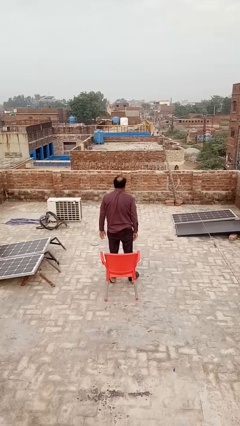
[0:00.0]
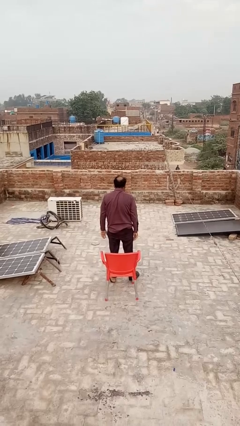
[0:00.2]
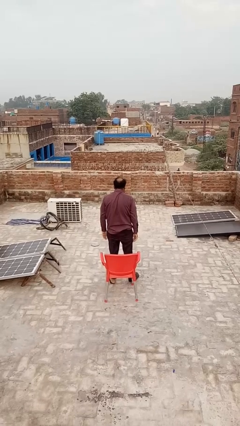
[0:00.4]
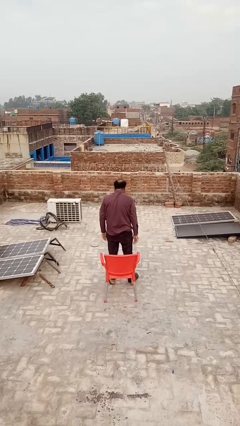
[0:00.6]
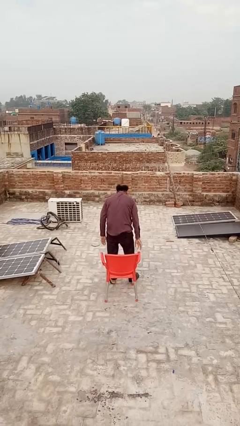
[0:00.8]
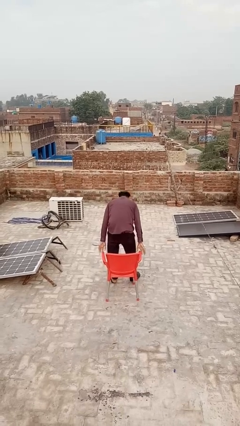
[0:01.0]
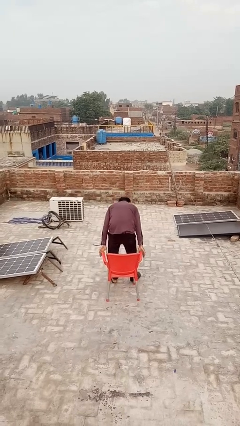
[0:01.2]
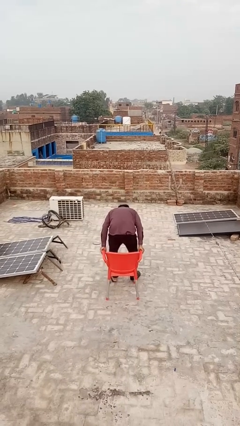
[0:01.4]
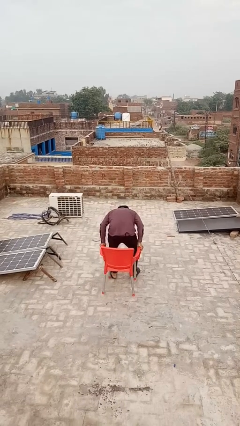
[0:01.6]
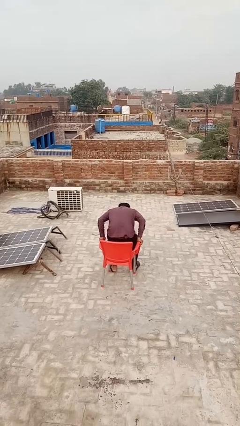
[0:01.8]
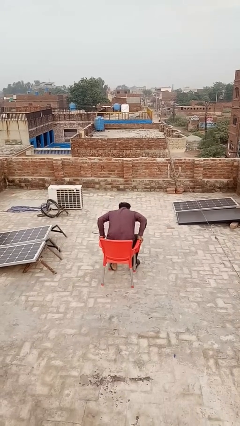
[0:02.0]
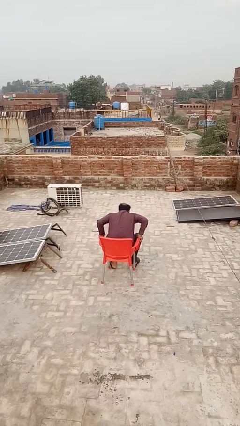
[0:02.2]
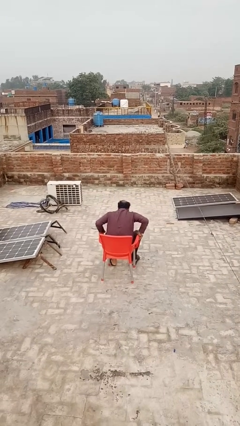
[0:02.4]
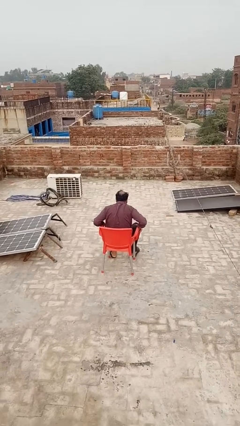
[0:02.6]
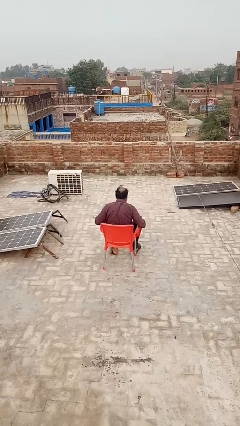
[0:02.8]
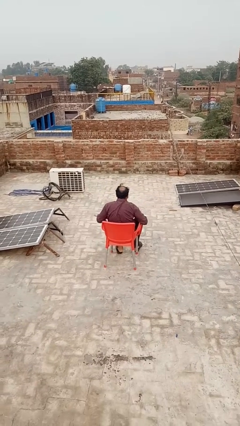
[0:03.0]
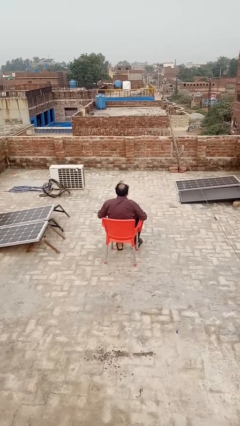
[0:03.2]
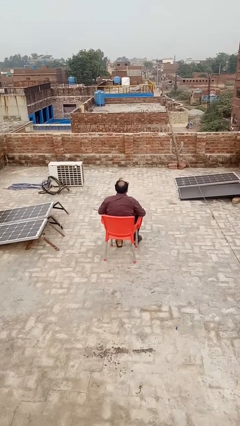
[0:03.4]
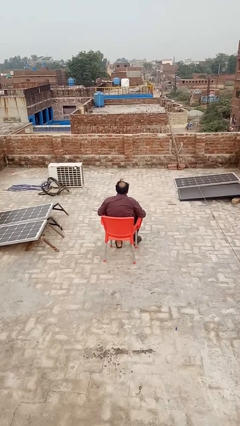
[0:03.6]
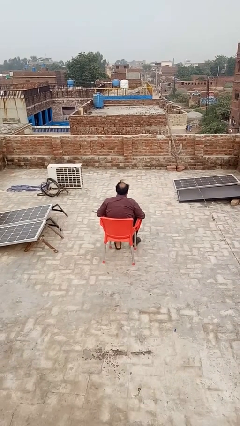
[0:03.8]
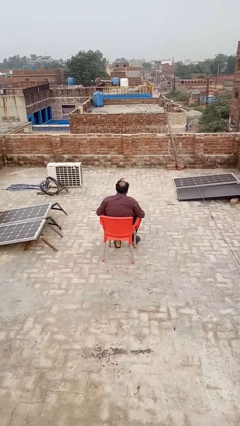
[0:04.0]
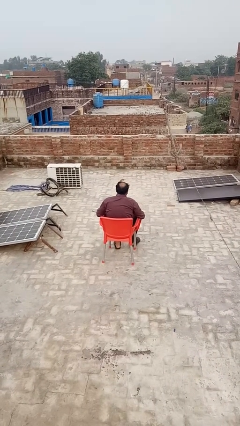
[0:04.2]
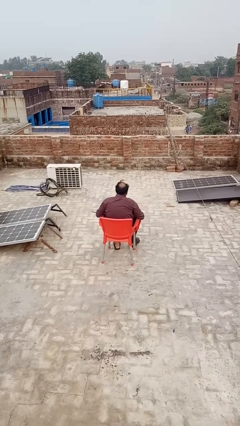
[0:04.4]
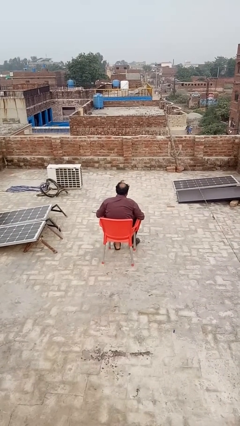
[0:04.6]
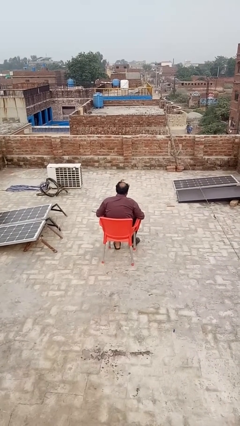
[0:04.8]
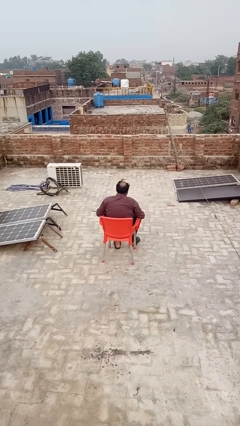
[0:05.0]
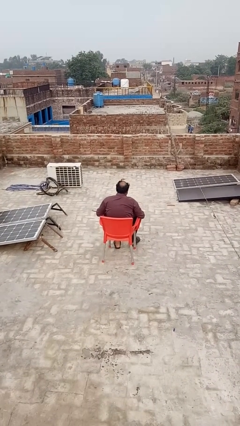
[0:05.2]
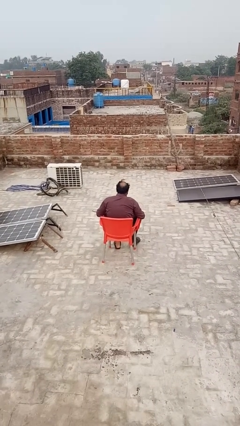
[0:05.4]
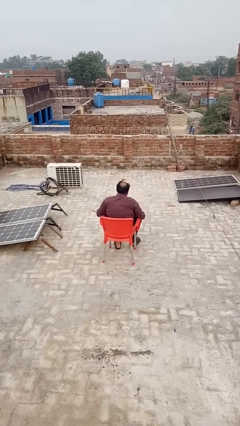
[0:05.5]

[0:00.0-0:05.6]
person sits down

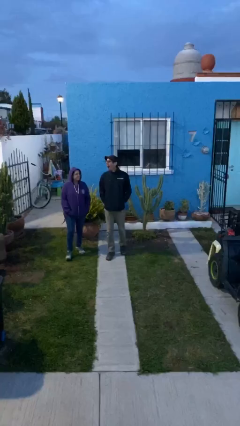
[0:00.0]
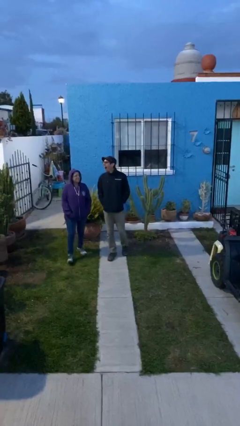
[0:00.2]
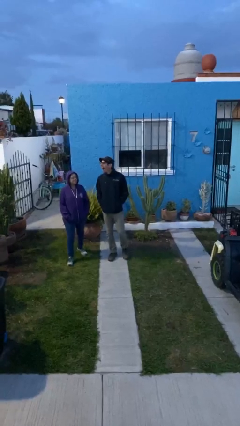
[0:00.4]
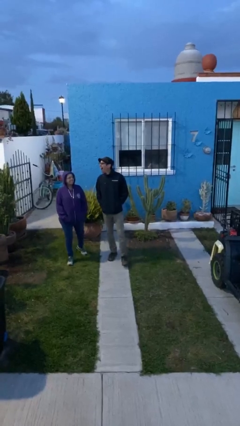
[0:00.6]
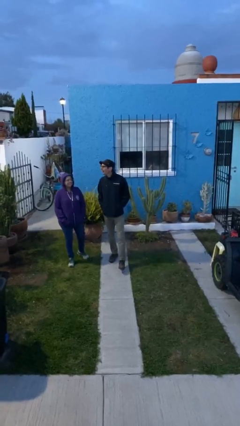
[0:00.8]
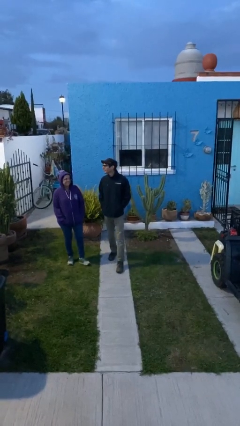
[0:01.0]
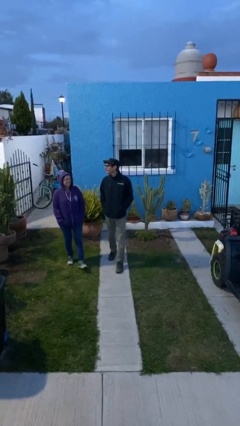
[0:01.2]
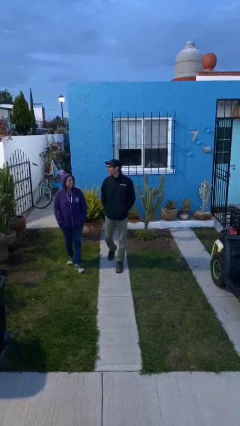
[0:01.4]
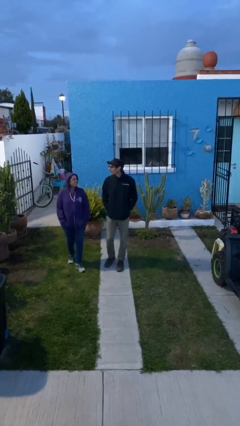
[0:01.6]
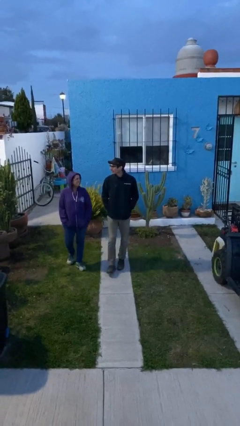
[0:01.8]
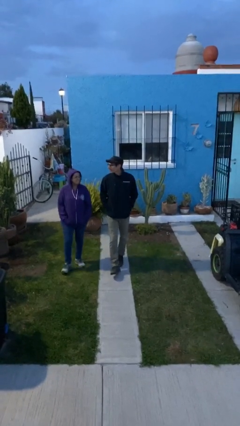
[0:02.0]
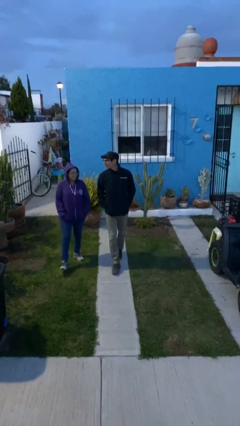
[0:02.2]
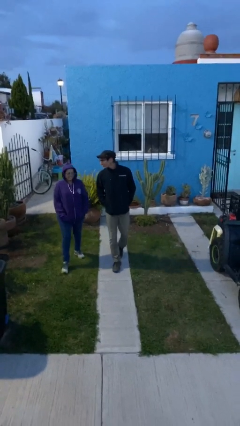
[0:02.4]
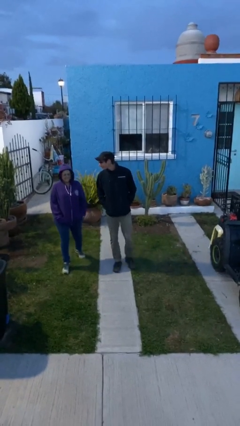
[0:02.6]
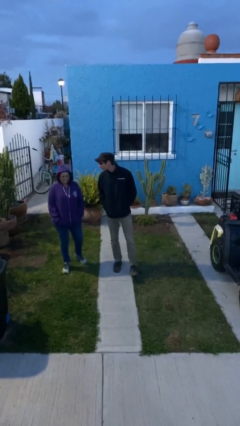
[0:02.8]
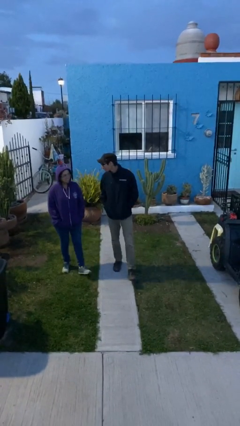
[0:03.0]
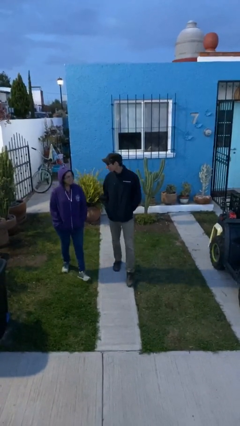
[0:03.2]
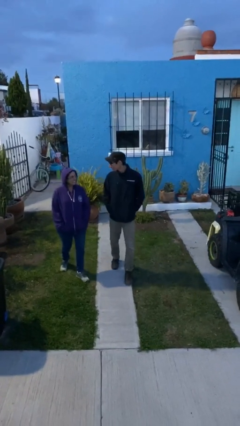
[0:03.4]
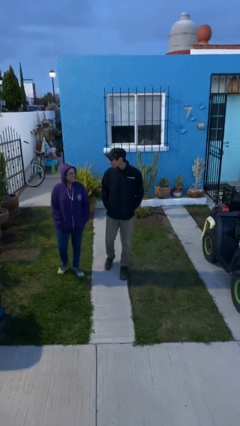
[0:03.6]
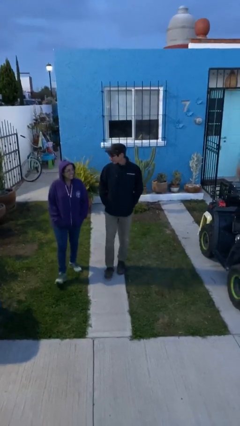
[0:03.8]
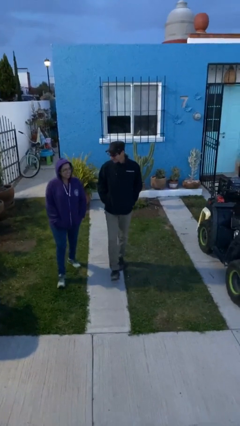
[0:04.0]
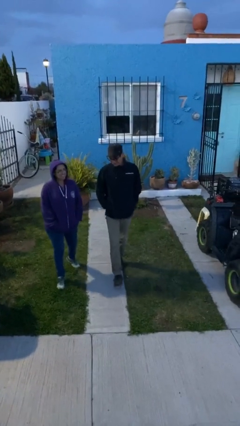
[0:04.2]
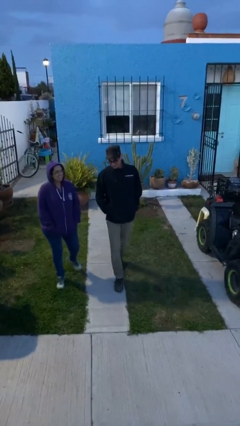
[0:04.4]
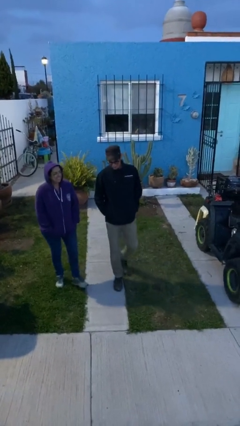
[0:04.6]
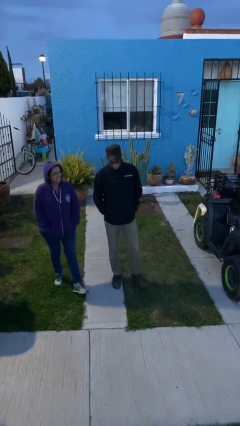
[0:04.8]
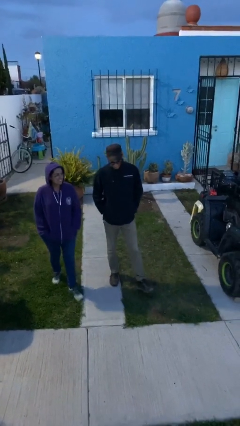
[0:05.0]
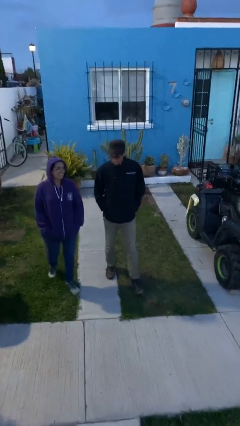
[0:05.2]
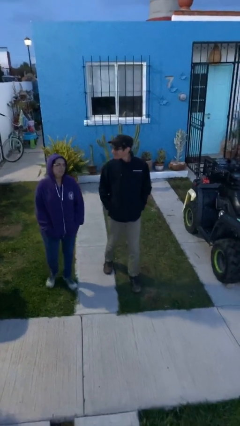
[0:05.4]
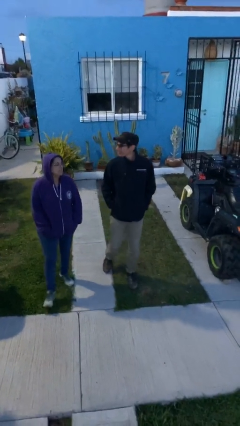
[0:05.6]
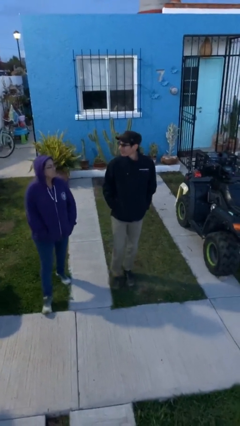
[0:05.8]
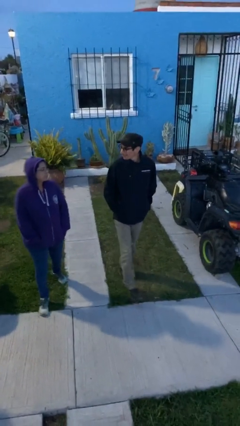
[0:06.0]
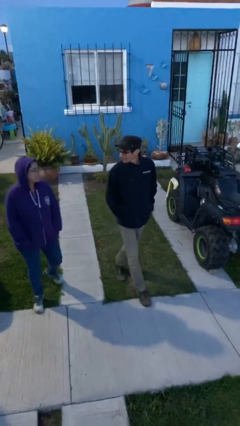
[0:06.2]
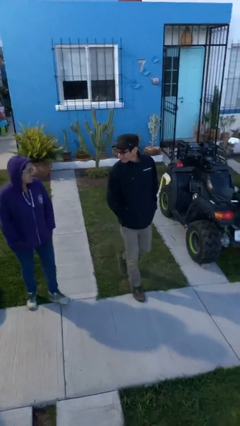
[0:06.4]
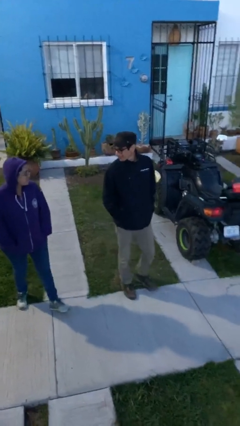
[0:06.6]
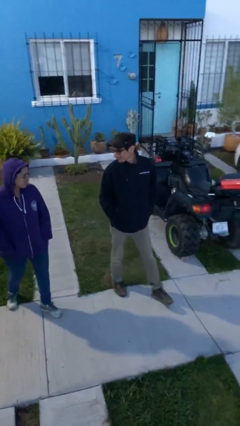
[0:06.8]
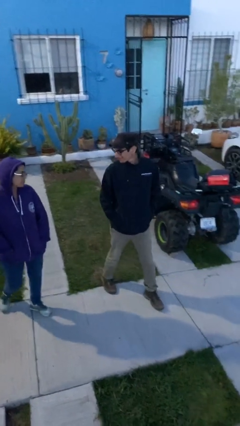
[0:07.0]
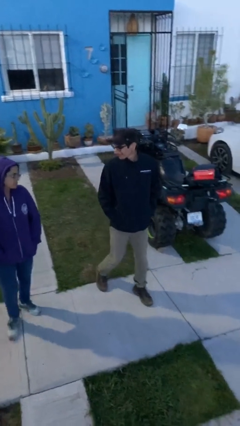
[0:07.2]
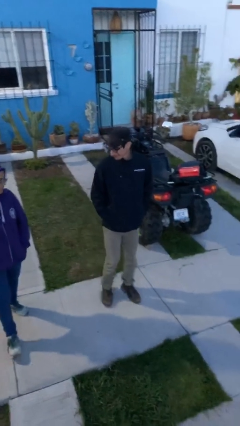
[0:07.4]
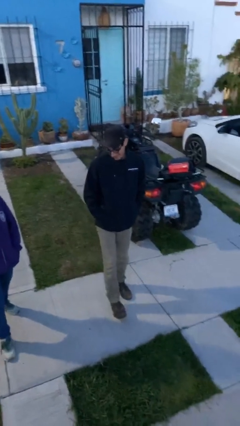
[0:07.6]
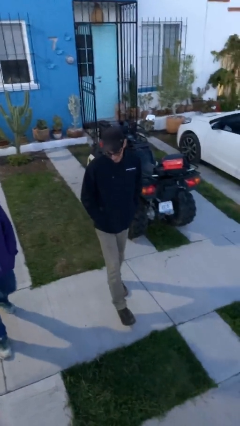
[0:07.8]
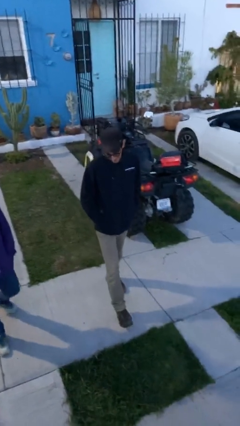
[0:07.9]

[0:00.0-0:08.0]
person talks to person

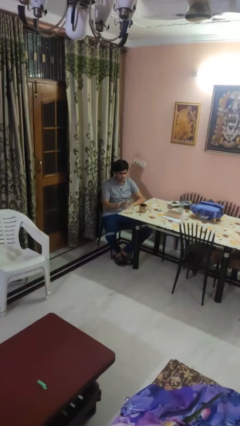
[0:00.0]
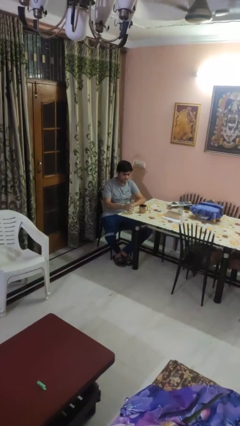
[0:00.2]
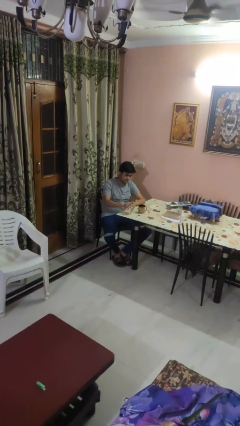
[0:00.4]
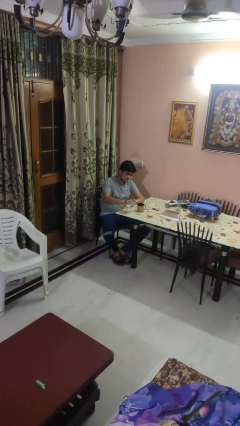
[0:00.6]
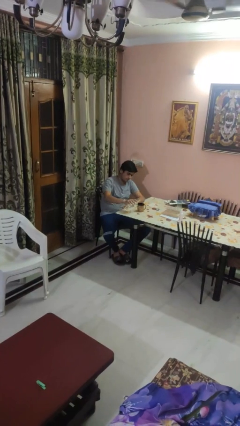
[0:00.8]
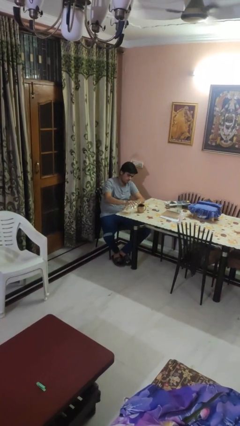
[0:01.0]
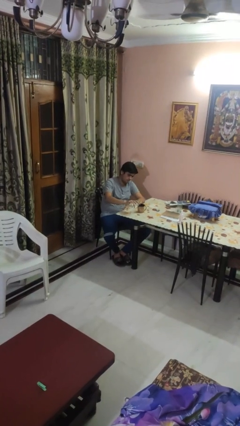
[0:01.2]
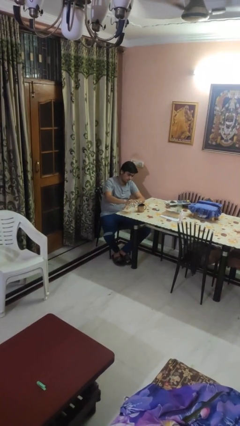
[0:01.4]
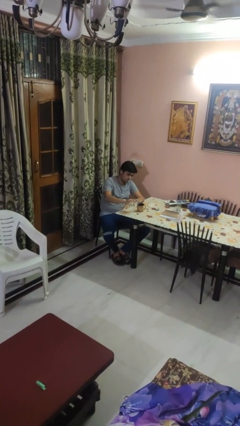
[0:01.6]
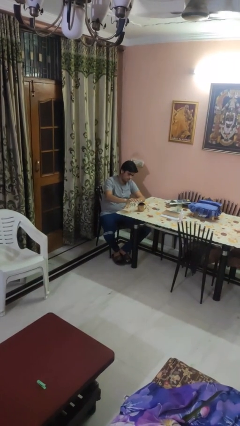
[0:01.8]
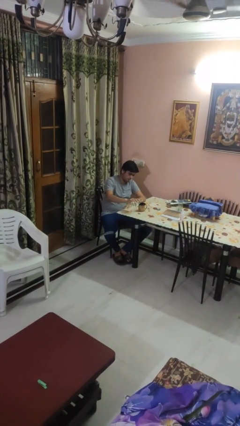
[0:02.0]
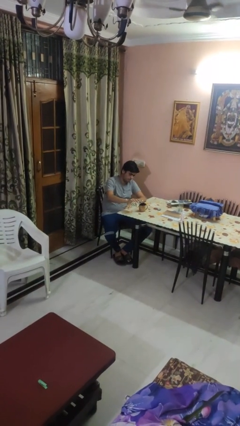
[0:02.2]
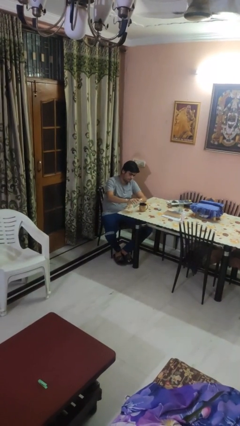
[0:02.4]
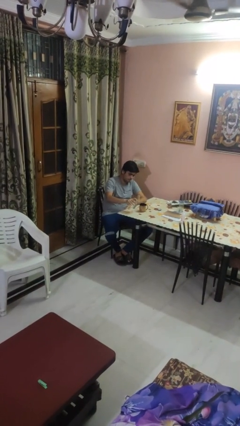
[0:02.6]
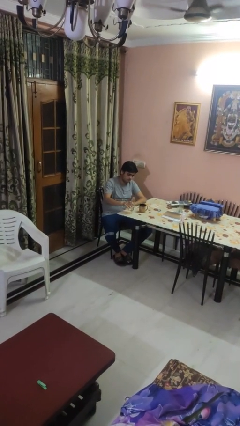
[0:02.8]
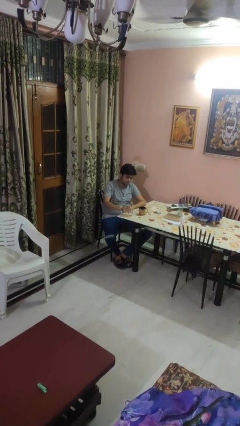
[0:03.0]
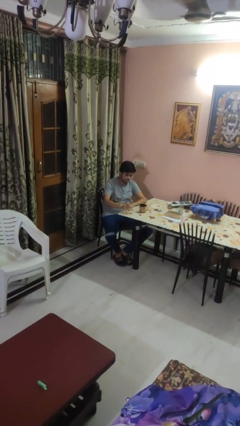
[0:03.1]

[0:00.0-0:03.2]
person pours liquid into cup

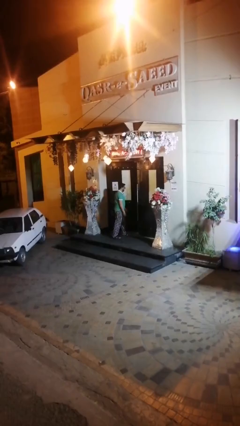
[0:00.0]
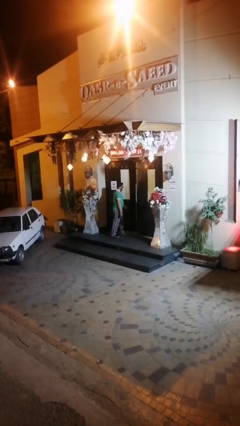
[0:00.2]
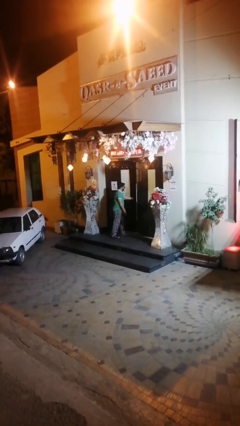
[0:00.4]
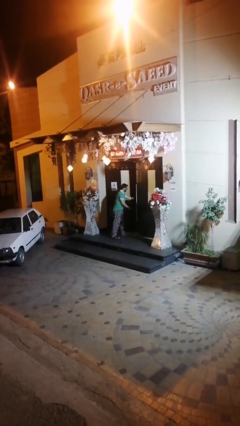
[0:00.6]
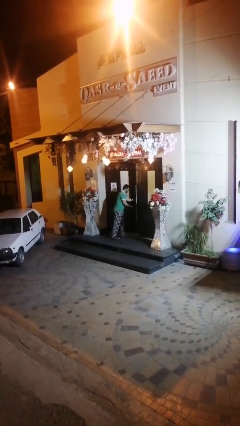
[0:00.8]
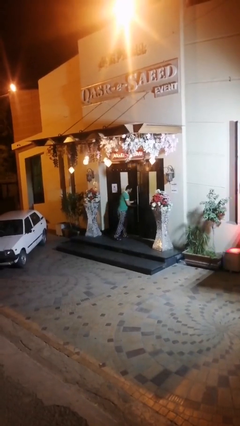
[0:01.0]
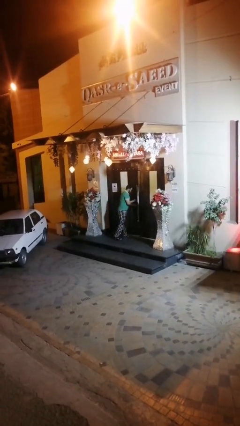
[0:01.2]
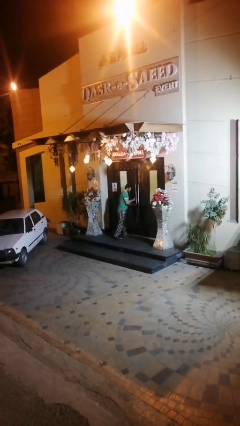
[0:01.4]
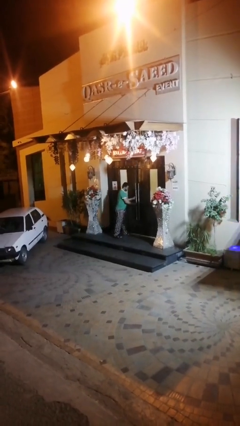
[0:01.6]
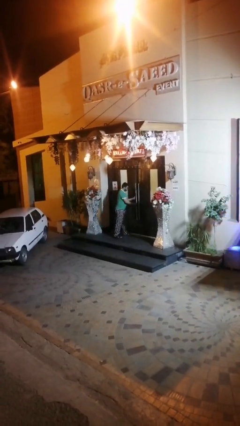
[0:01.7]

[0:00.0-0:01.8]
person closes facility door
